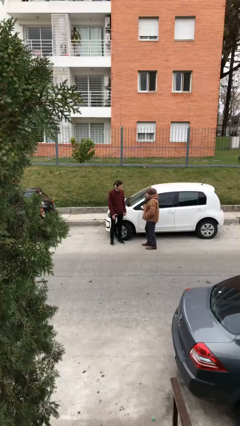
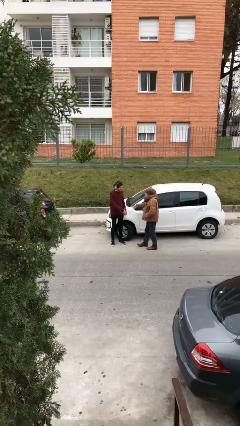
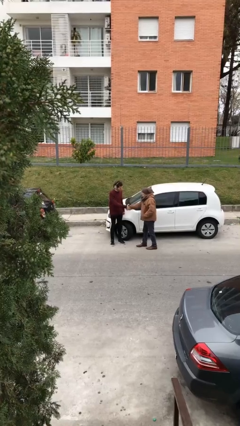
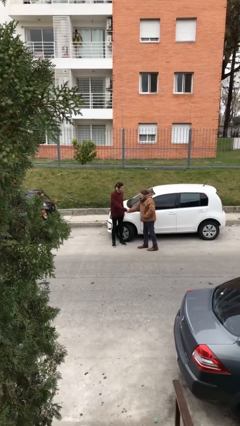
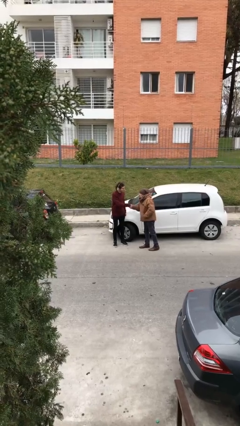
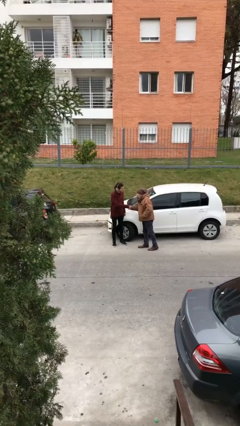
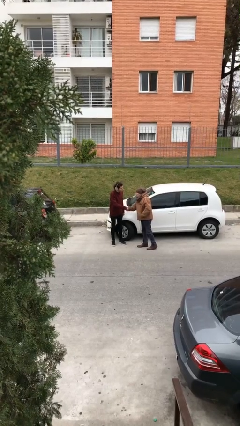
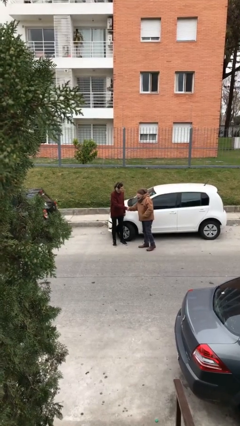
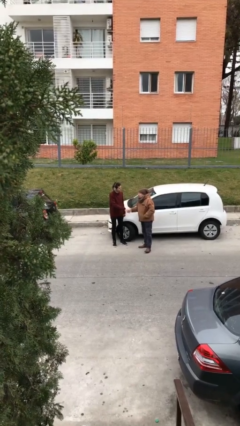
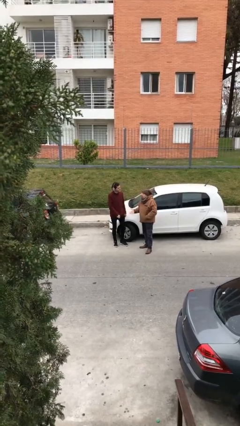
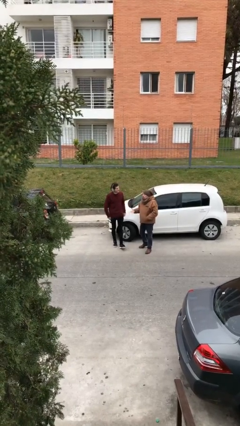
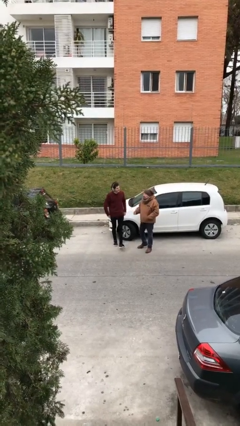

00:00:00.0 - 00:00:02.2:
person shakes hand

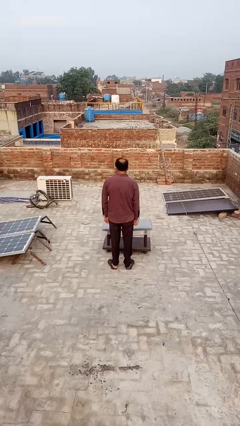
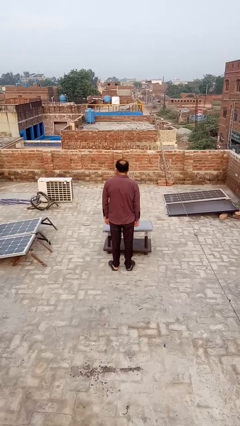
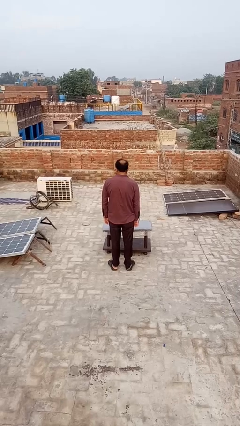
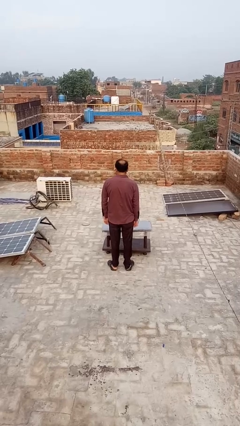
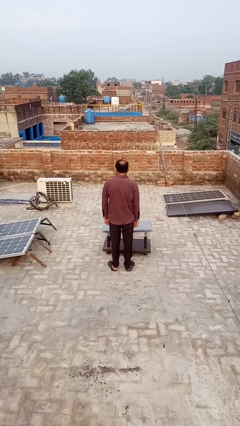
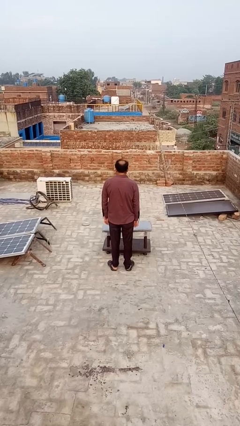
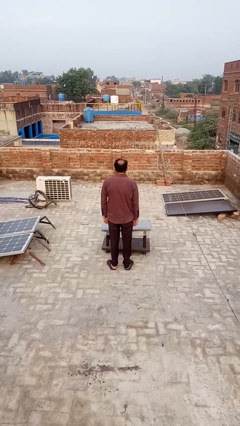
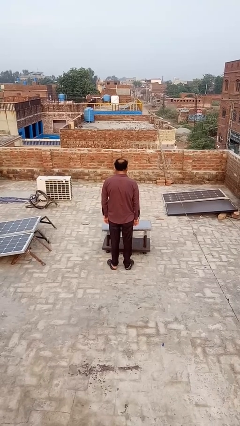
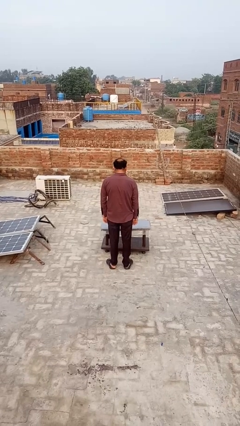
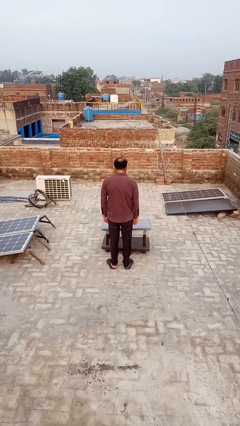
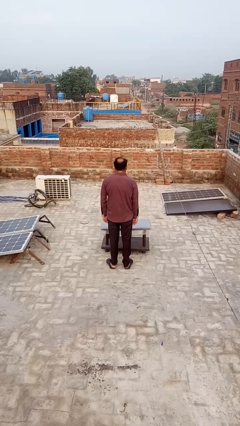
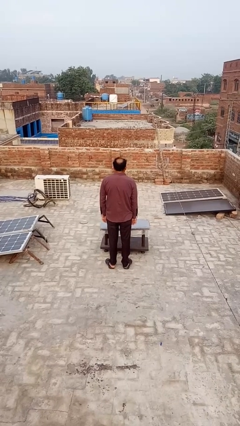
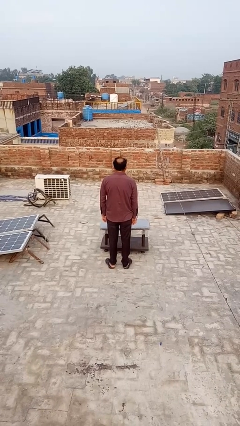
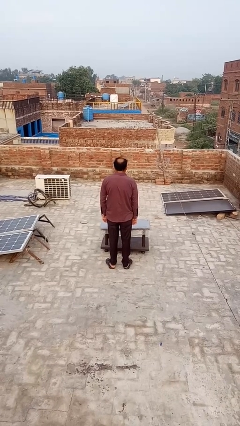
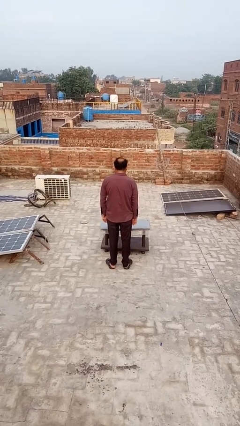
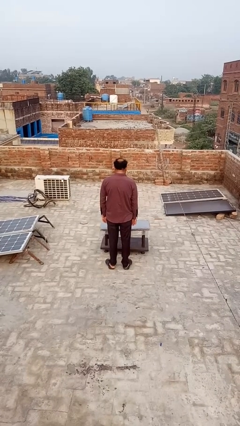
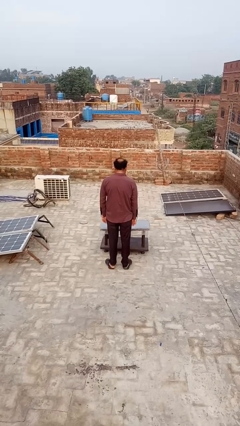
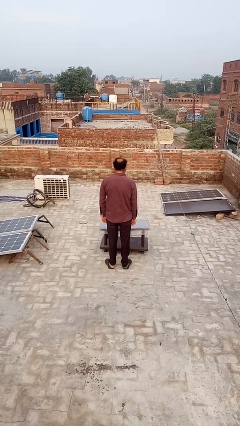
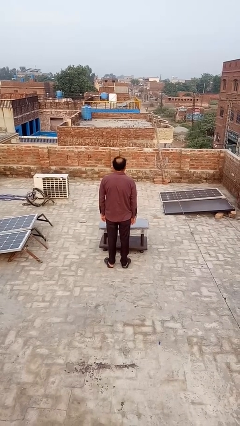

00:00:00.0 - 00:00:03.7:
person nods head

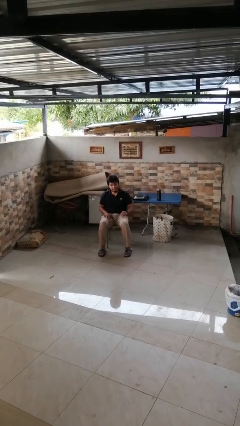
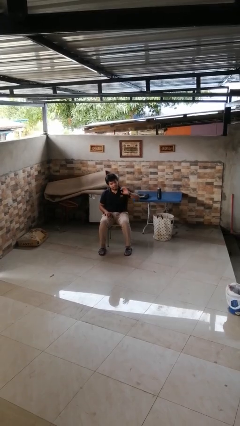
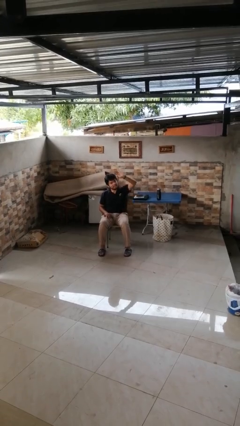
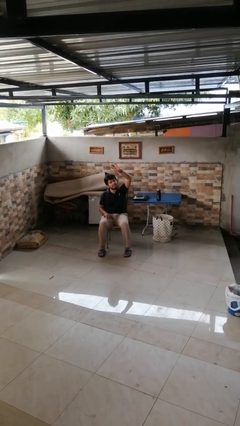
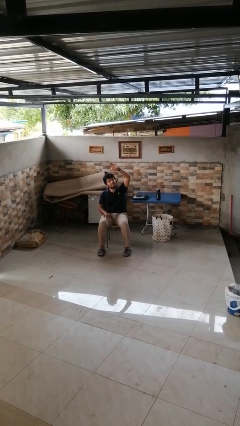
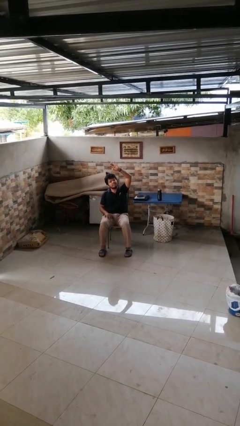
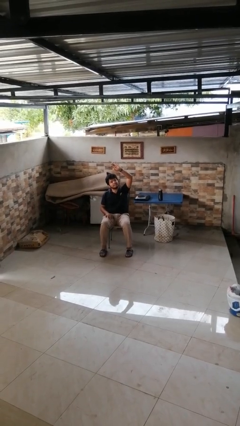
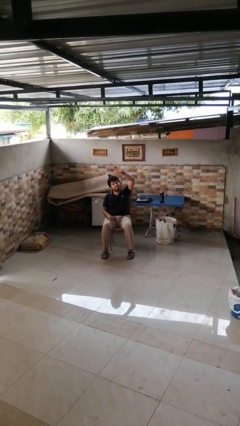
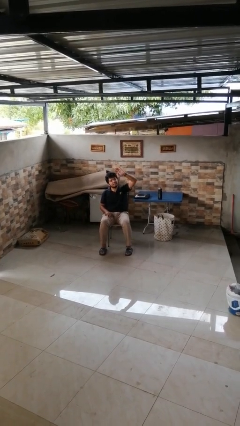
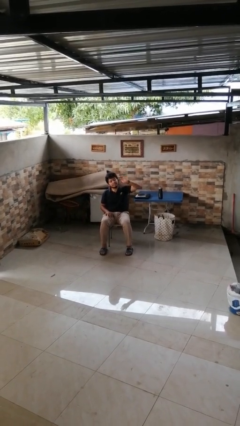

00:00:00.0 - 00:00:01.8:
person gestures raise hand

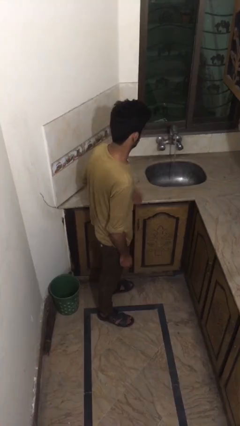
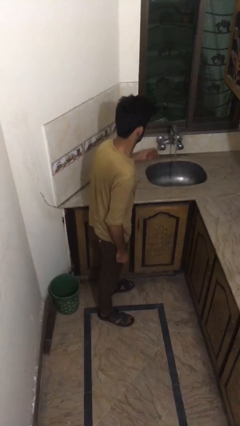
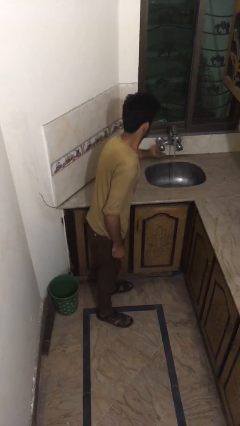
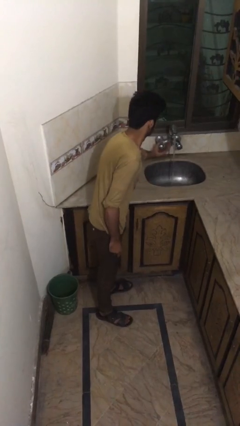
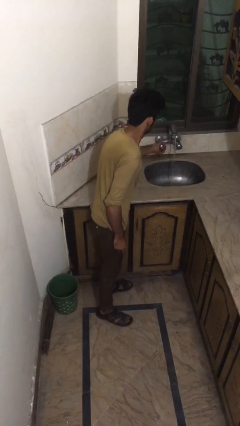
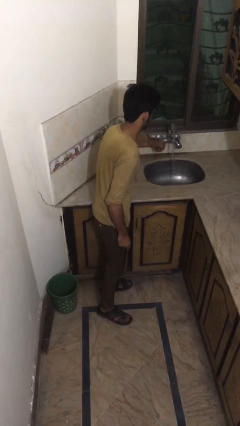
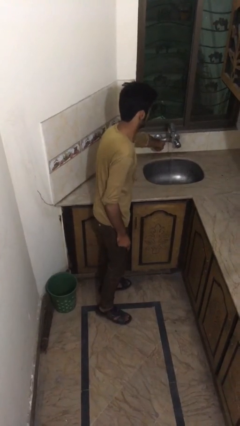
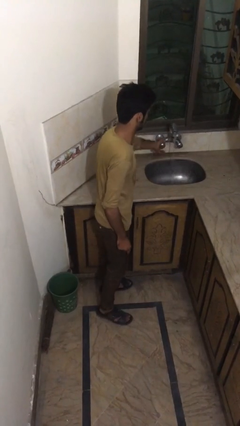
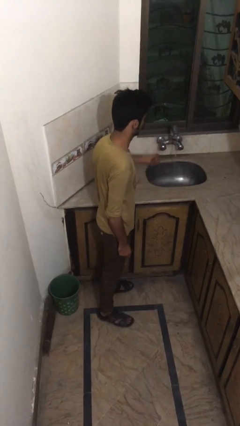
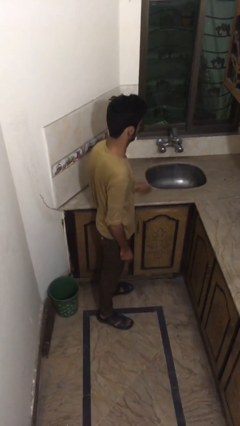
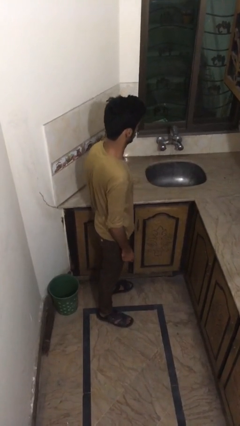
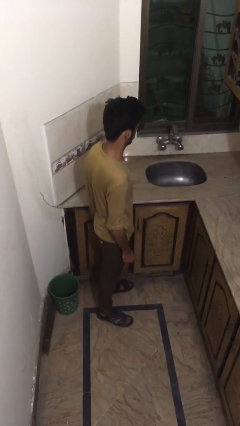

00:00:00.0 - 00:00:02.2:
person turns off faucet

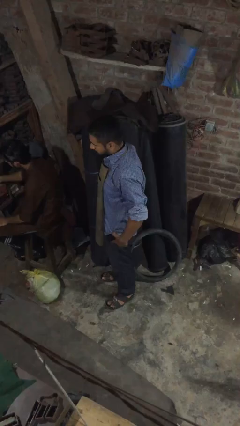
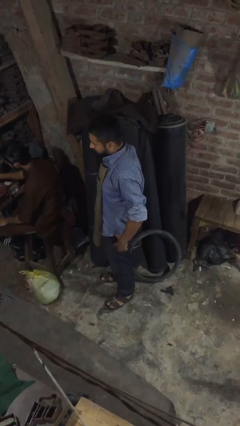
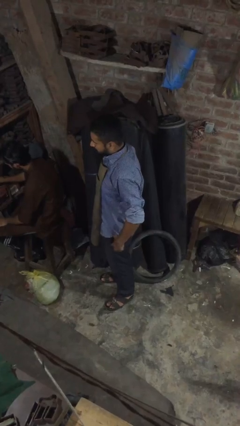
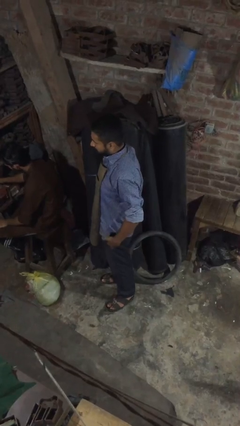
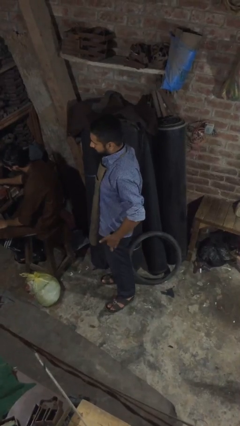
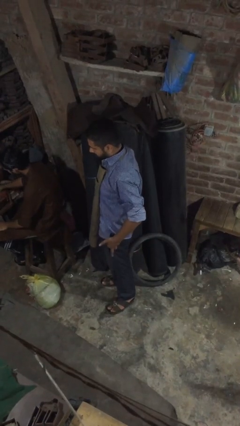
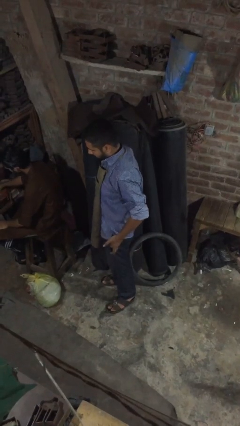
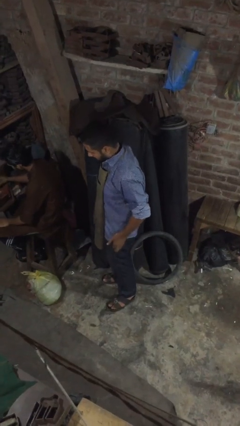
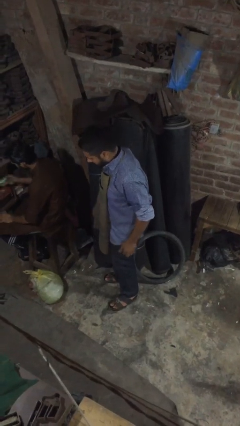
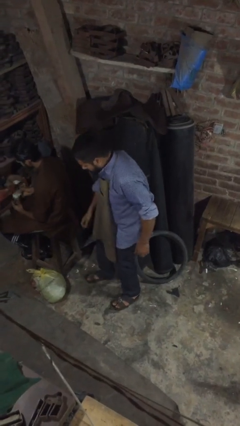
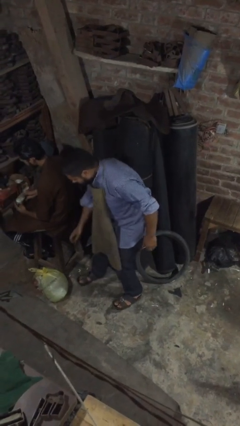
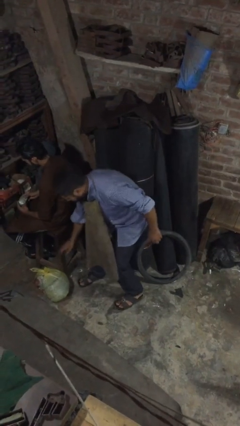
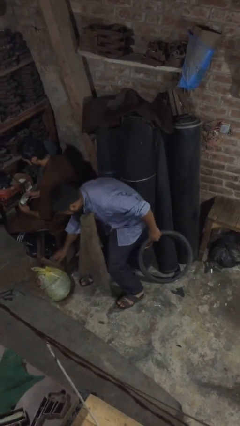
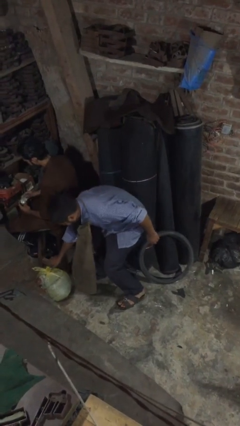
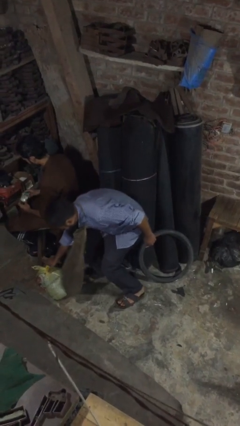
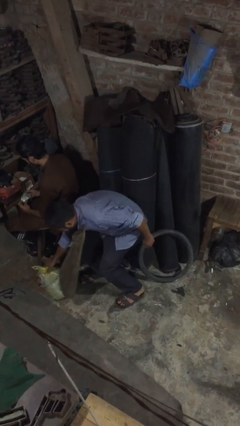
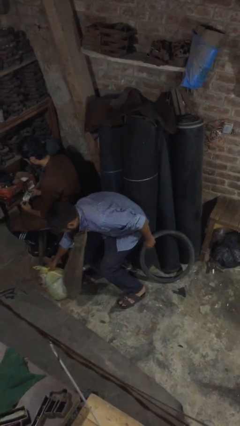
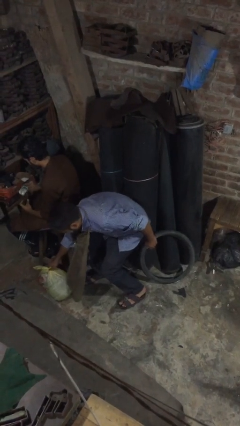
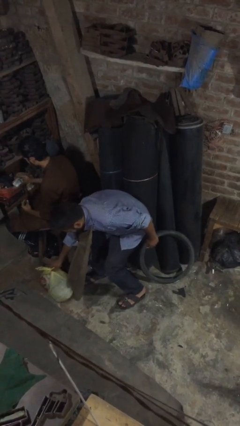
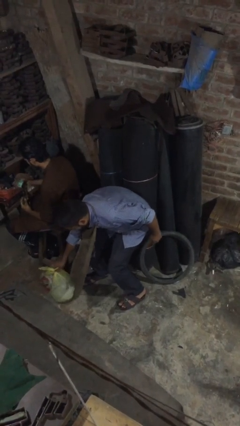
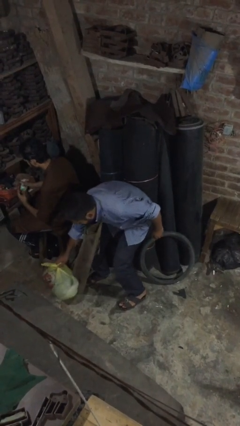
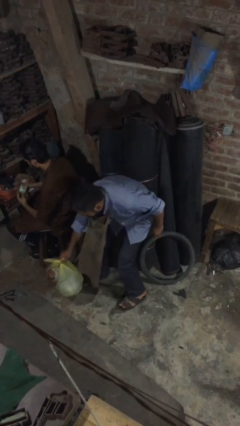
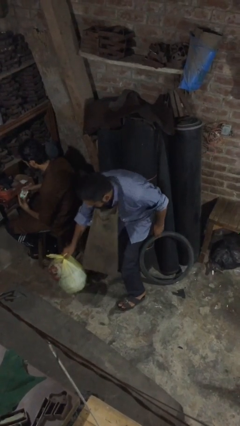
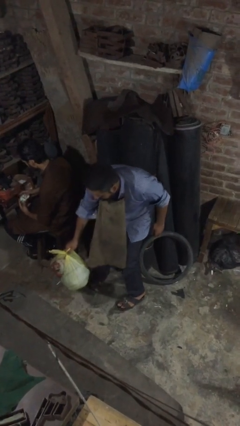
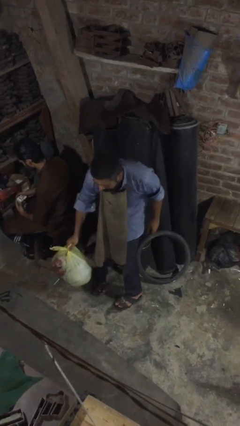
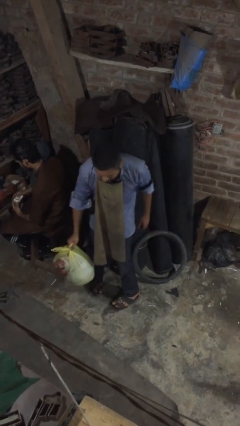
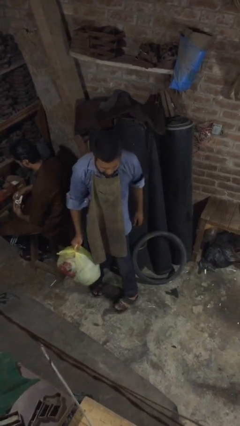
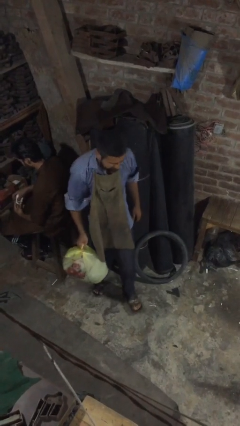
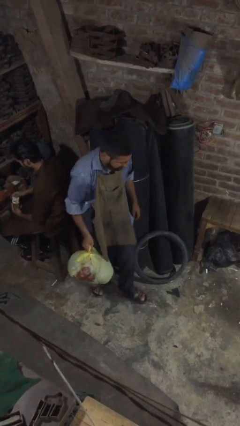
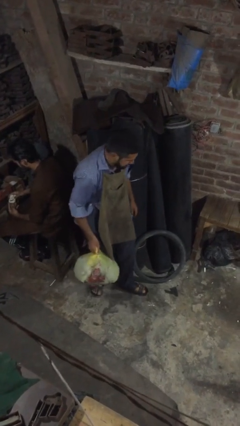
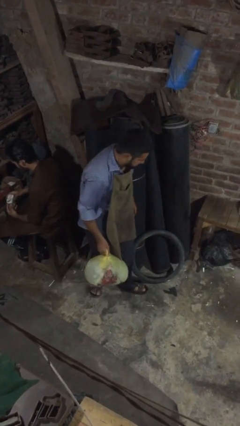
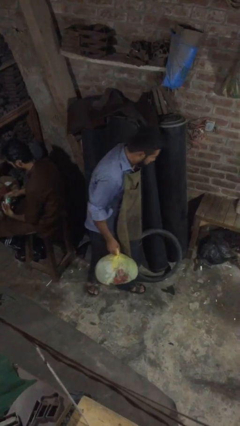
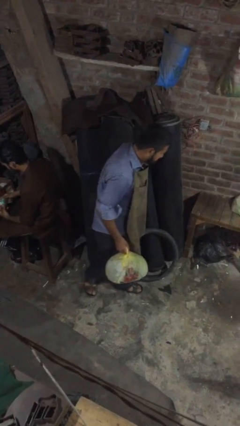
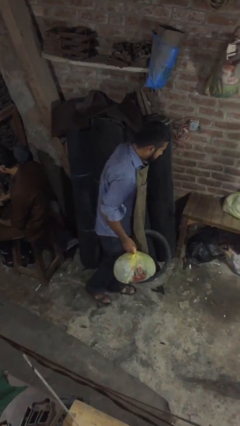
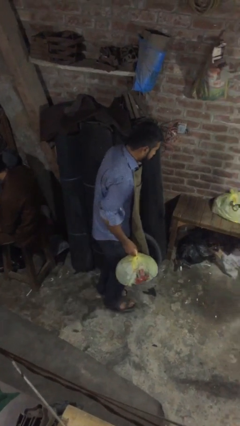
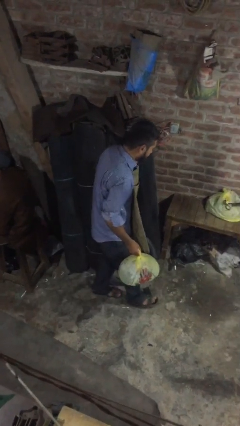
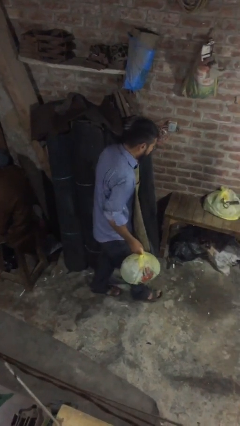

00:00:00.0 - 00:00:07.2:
person steals object from person

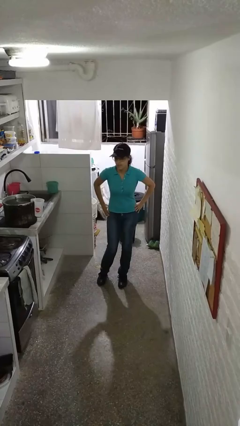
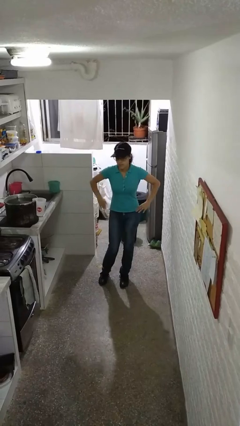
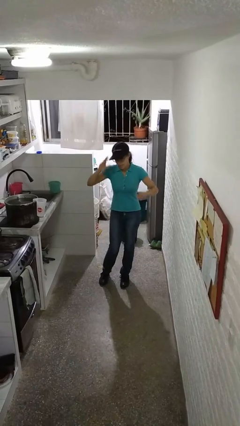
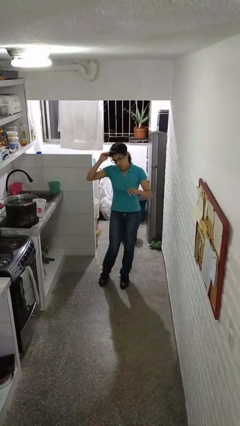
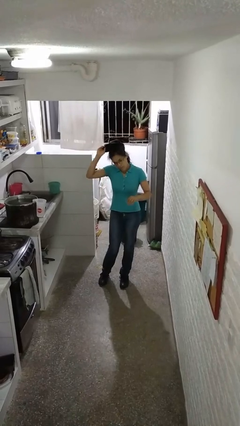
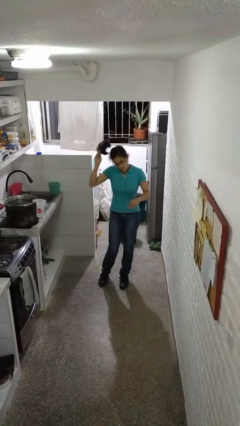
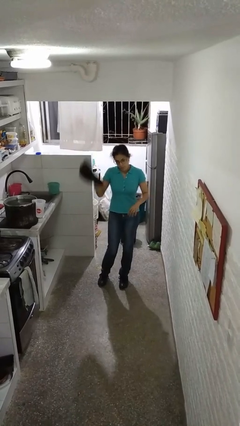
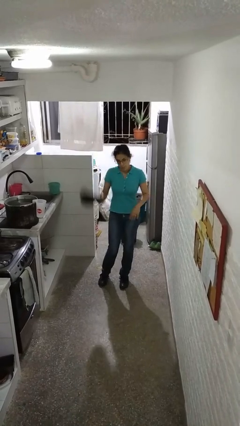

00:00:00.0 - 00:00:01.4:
person takes off hat
